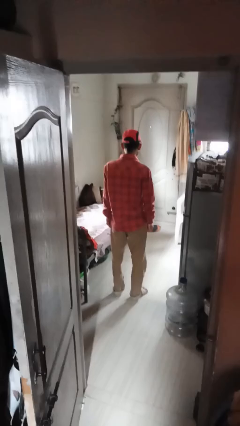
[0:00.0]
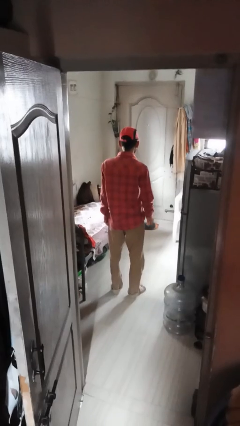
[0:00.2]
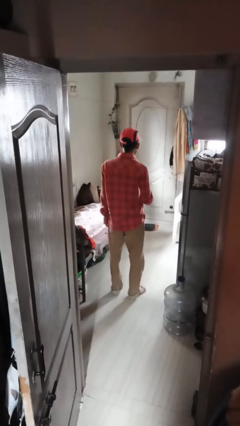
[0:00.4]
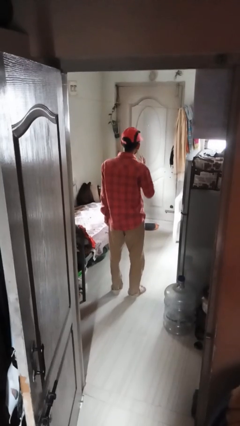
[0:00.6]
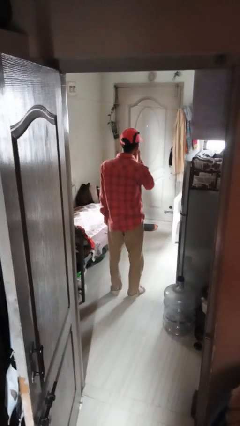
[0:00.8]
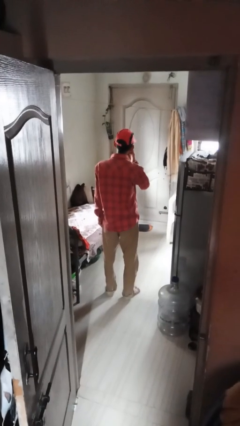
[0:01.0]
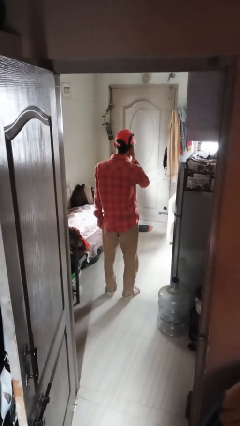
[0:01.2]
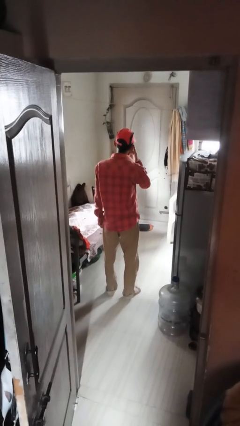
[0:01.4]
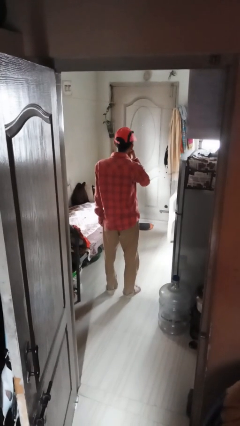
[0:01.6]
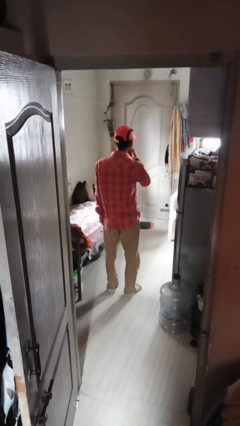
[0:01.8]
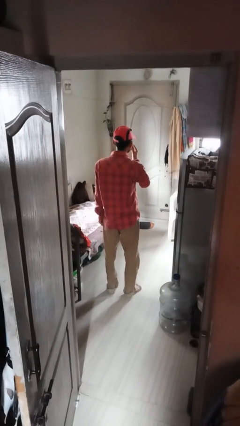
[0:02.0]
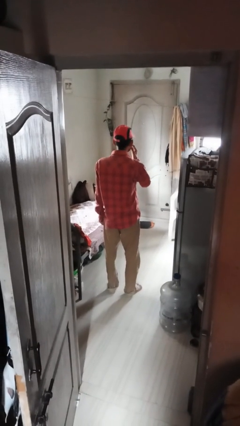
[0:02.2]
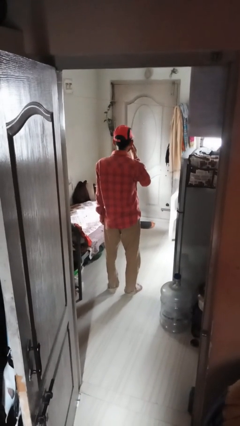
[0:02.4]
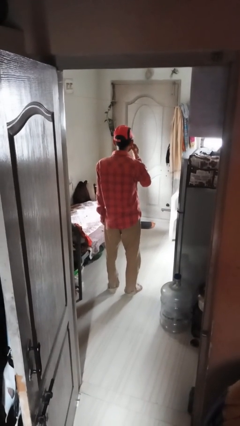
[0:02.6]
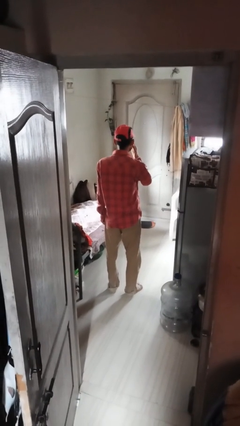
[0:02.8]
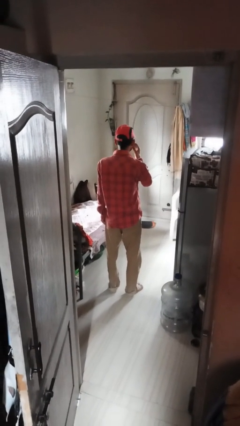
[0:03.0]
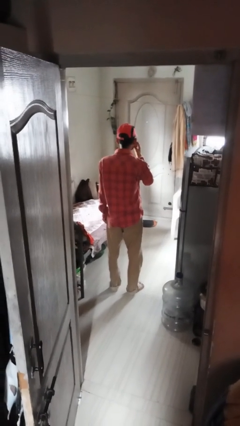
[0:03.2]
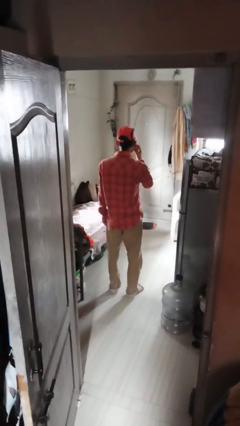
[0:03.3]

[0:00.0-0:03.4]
person scratches face

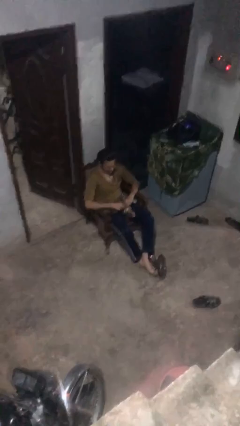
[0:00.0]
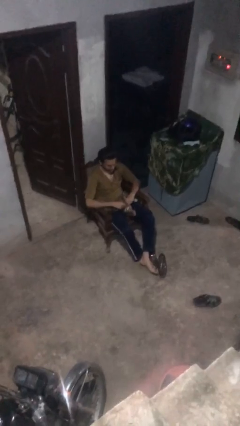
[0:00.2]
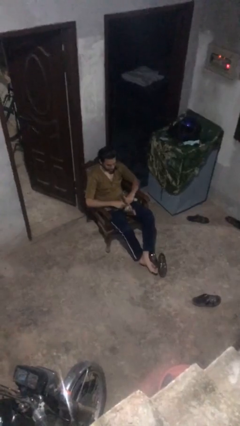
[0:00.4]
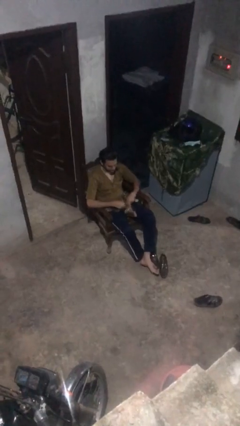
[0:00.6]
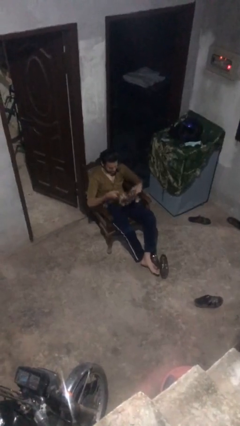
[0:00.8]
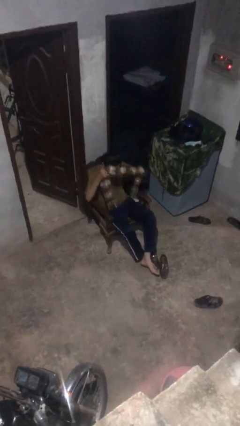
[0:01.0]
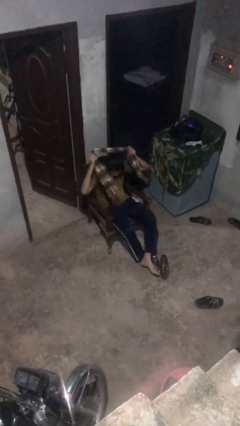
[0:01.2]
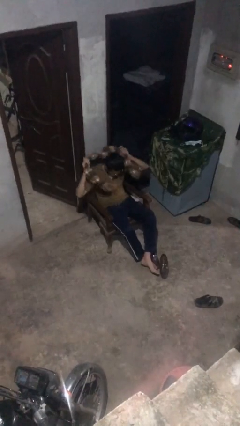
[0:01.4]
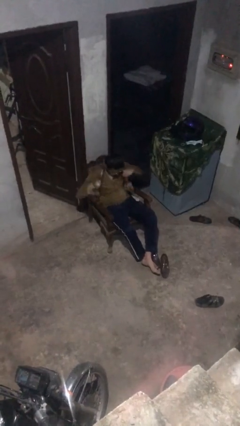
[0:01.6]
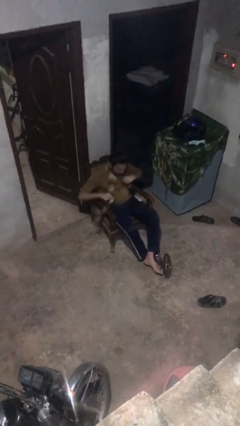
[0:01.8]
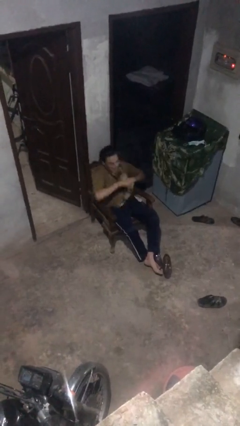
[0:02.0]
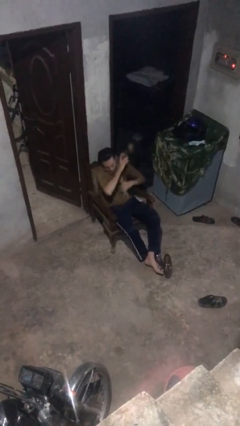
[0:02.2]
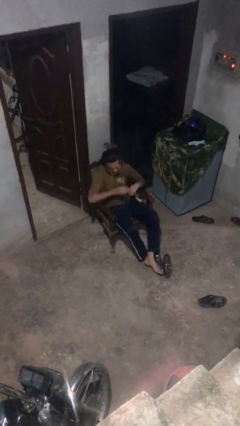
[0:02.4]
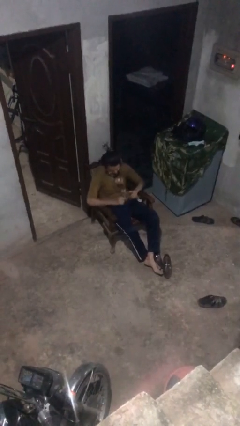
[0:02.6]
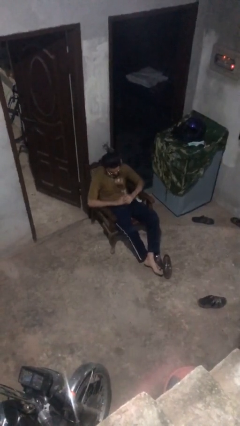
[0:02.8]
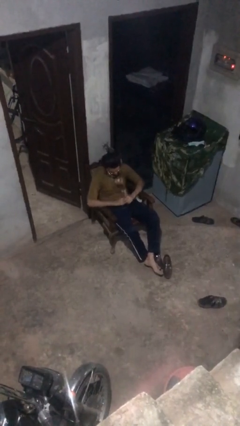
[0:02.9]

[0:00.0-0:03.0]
person puts on scarf

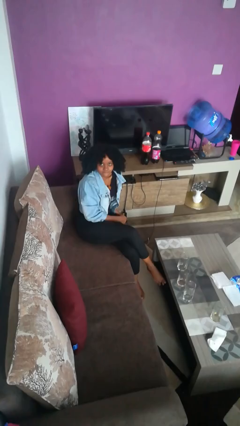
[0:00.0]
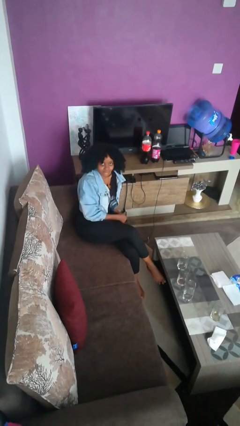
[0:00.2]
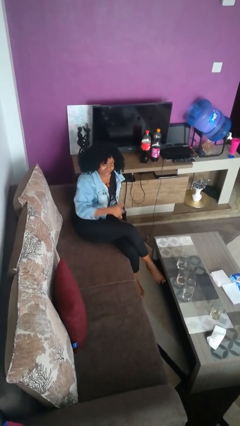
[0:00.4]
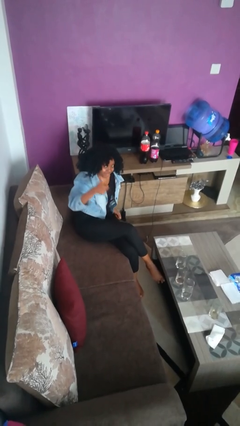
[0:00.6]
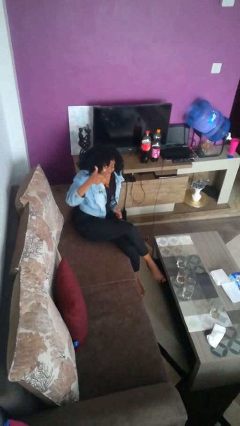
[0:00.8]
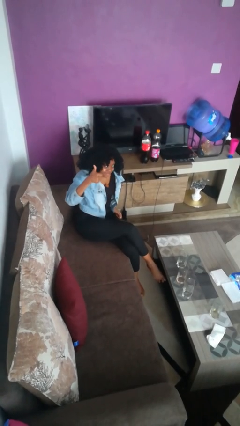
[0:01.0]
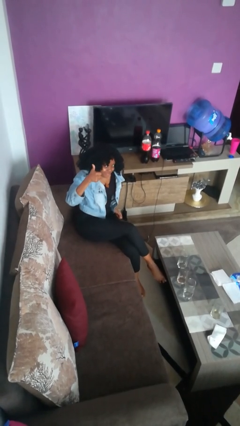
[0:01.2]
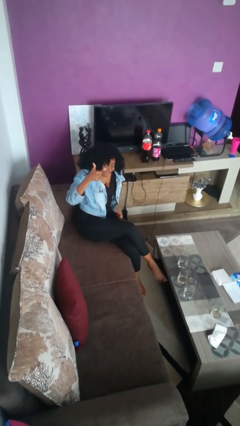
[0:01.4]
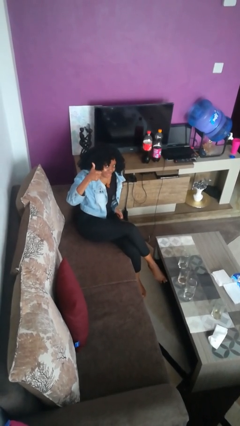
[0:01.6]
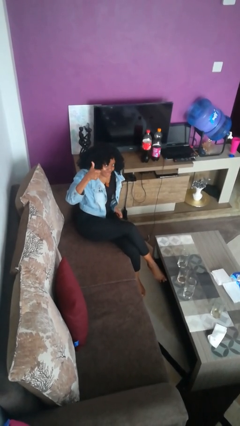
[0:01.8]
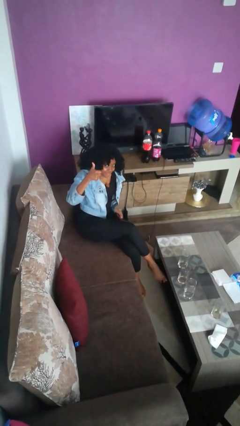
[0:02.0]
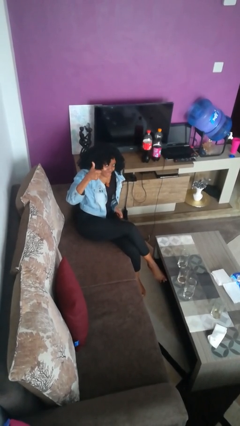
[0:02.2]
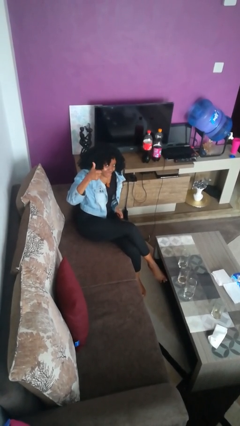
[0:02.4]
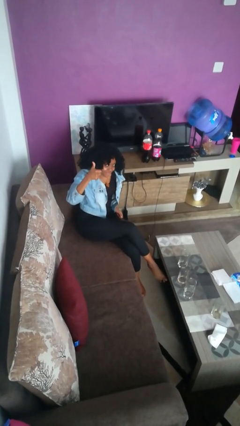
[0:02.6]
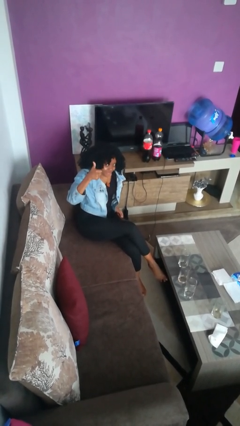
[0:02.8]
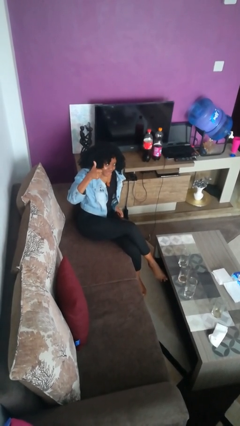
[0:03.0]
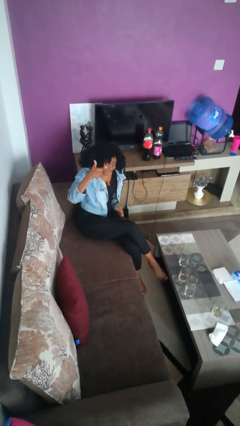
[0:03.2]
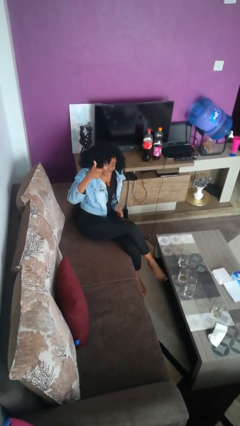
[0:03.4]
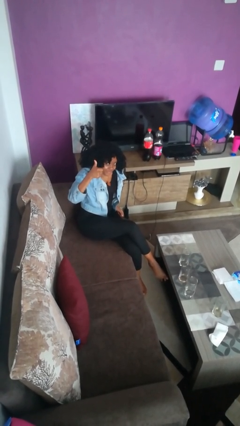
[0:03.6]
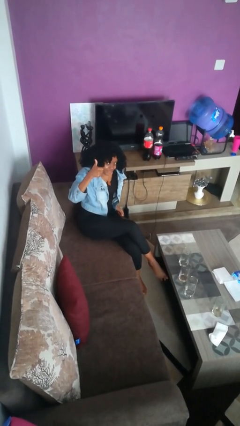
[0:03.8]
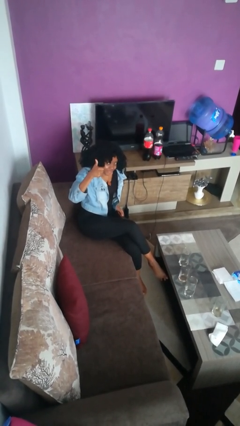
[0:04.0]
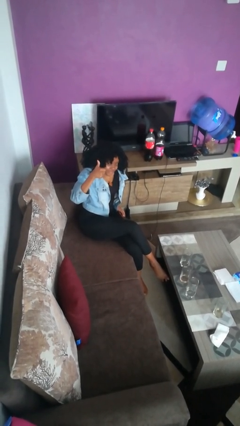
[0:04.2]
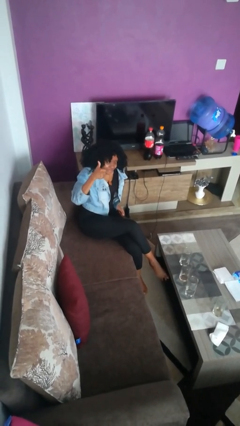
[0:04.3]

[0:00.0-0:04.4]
person gestures thumbs up

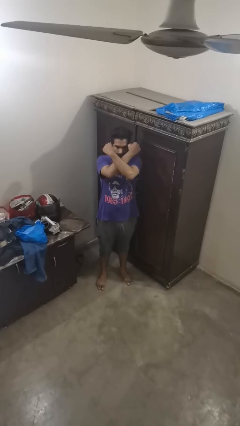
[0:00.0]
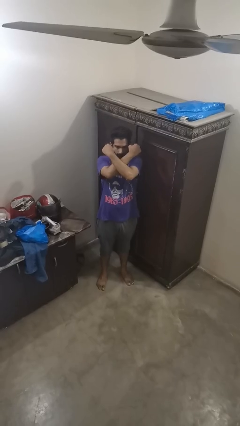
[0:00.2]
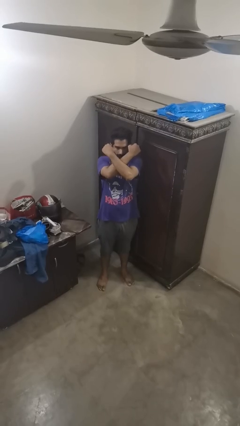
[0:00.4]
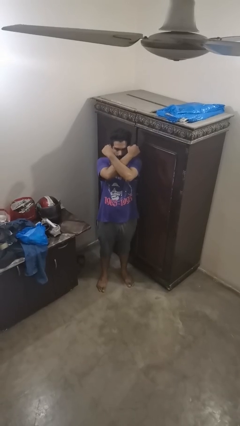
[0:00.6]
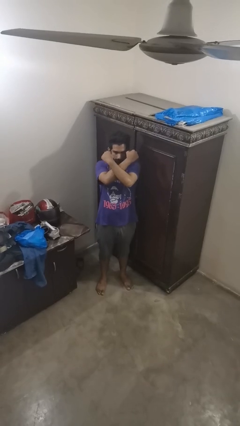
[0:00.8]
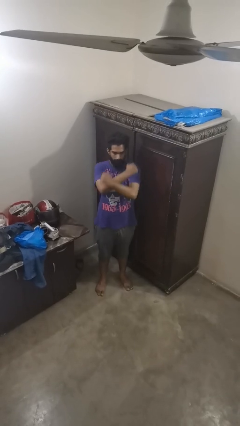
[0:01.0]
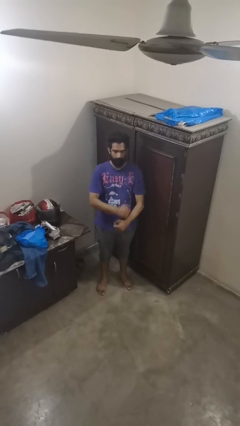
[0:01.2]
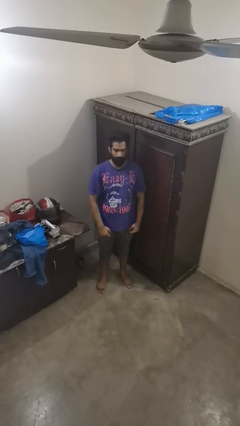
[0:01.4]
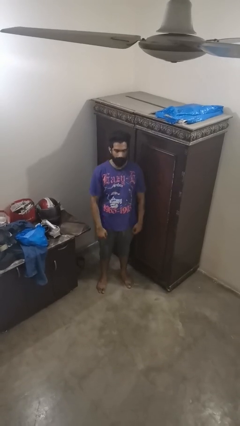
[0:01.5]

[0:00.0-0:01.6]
person gestures arms x

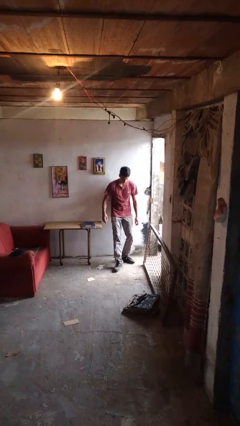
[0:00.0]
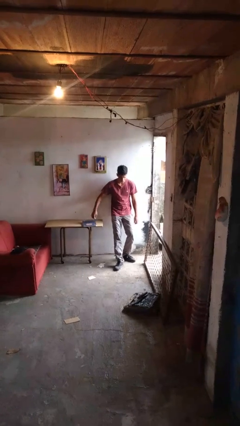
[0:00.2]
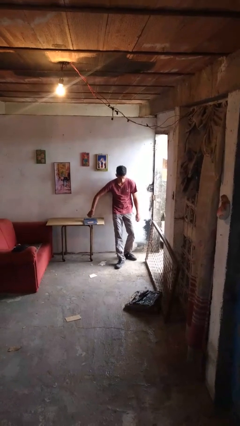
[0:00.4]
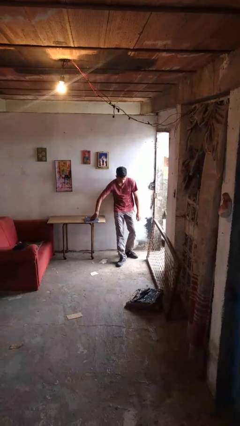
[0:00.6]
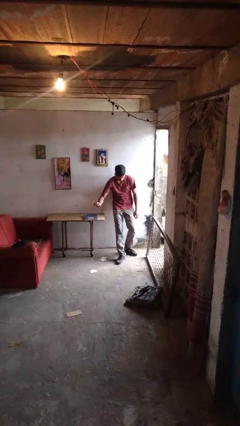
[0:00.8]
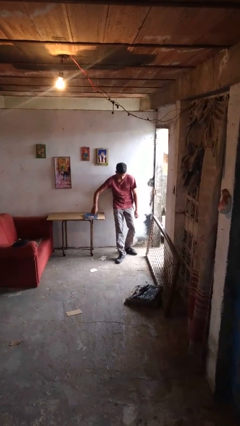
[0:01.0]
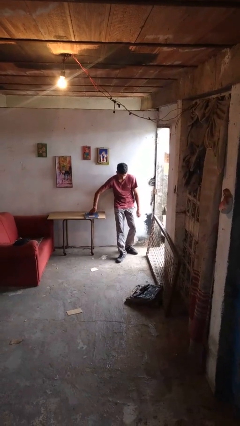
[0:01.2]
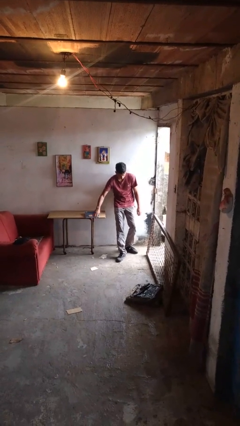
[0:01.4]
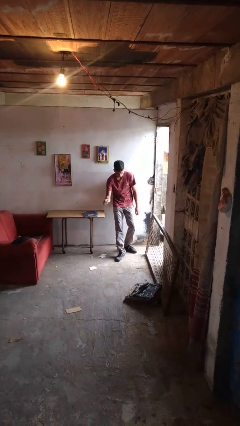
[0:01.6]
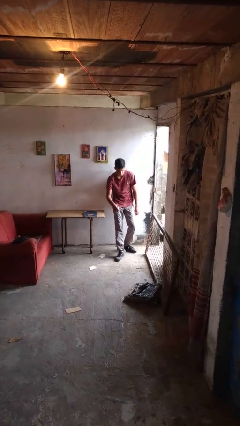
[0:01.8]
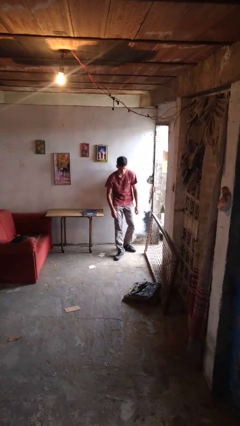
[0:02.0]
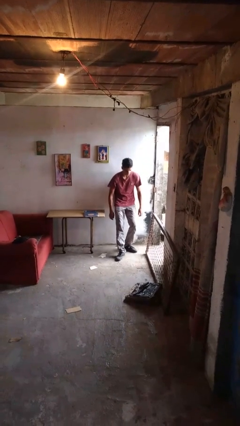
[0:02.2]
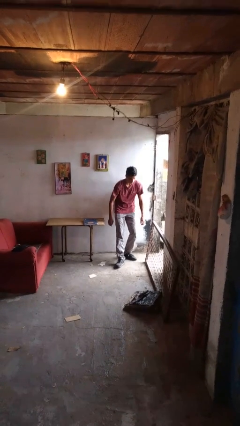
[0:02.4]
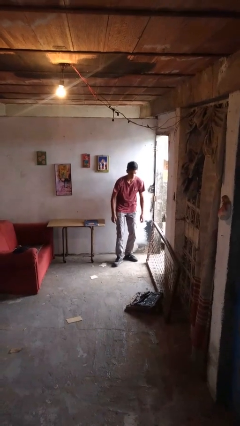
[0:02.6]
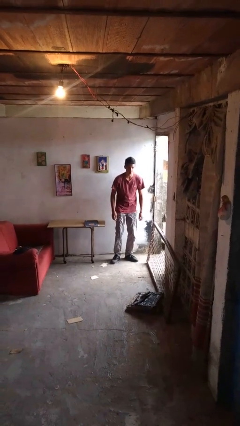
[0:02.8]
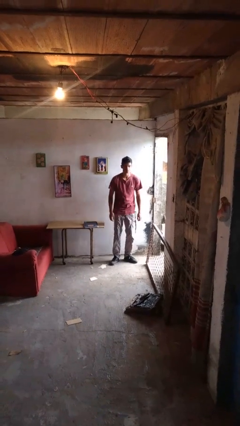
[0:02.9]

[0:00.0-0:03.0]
person drops object

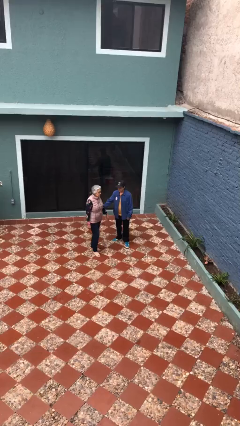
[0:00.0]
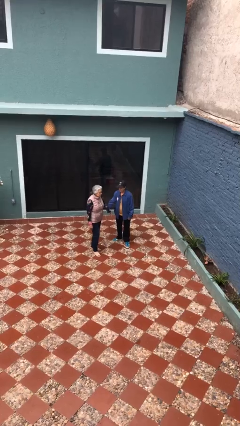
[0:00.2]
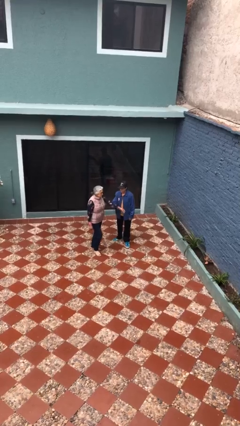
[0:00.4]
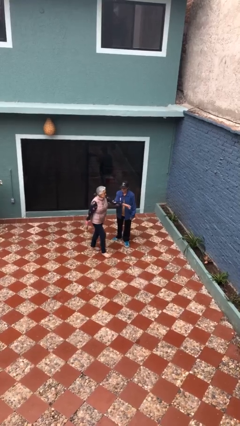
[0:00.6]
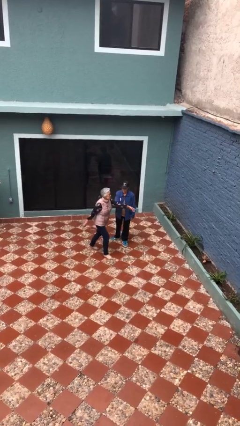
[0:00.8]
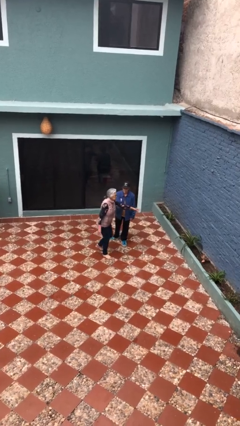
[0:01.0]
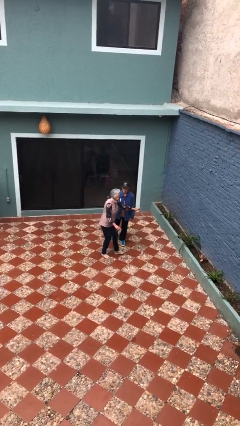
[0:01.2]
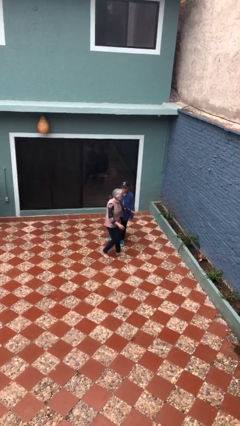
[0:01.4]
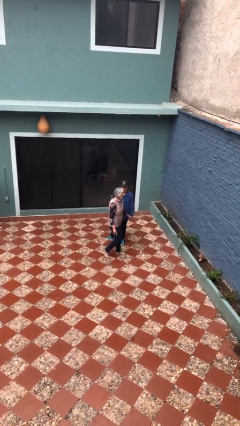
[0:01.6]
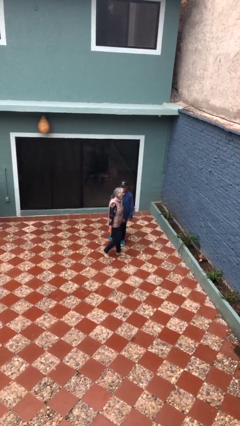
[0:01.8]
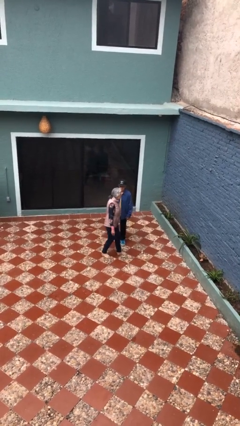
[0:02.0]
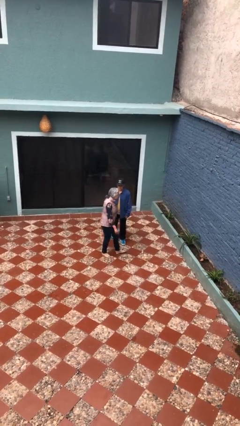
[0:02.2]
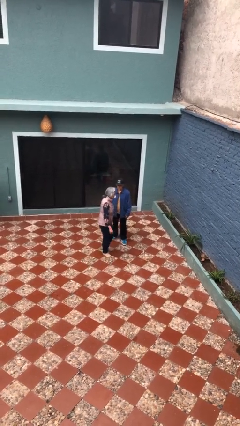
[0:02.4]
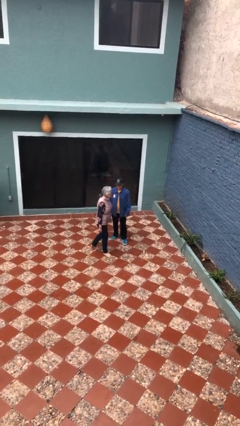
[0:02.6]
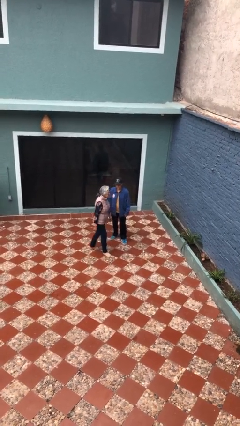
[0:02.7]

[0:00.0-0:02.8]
person grabs person by forearm
